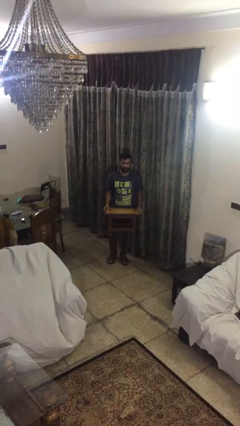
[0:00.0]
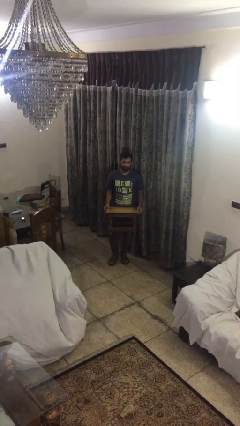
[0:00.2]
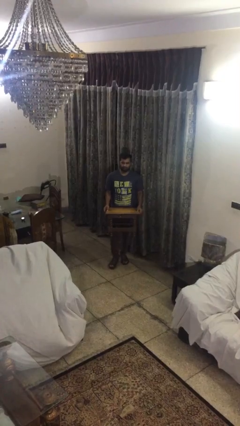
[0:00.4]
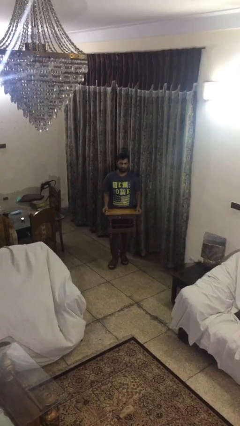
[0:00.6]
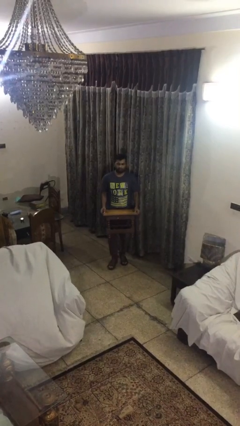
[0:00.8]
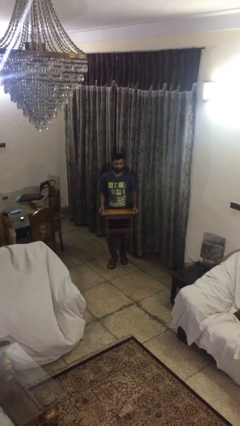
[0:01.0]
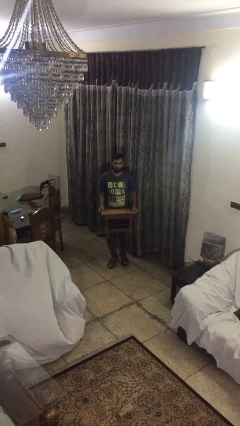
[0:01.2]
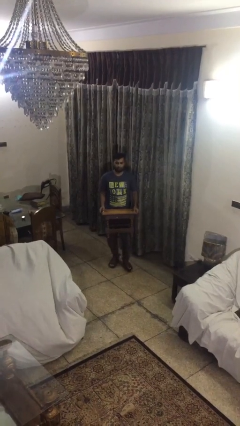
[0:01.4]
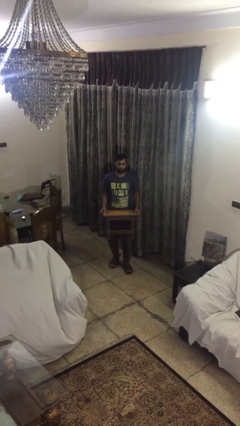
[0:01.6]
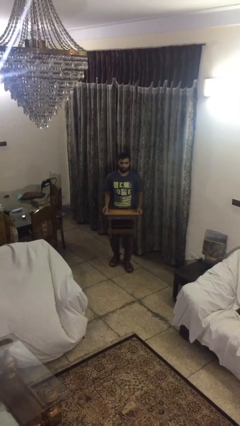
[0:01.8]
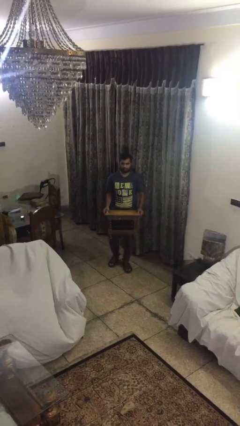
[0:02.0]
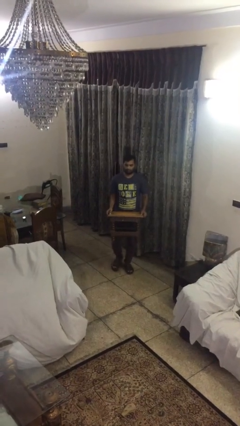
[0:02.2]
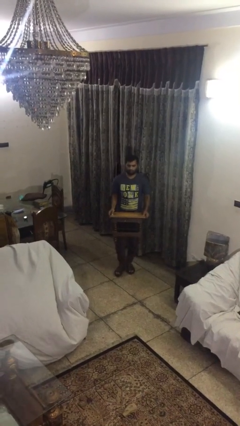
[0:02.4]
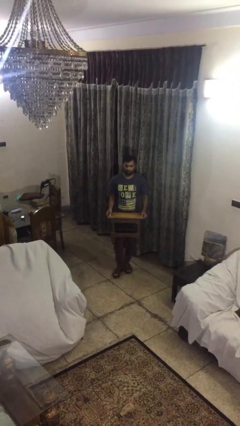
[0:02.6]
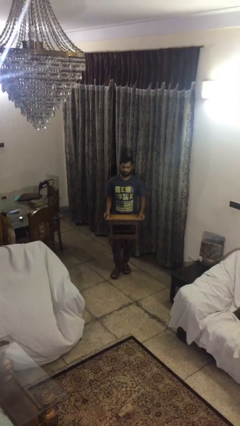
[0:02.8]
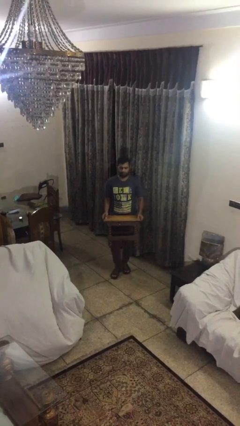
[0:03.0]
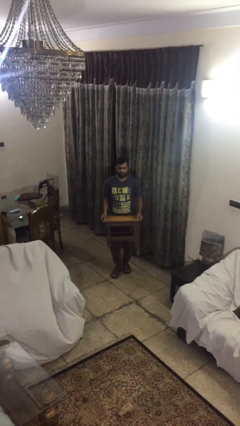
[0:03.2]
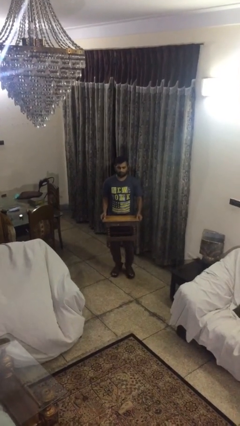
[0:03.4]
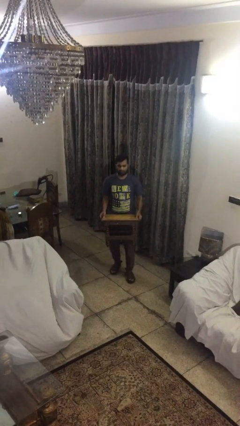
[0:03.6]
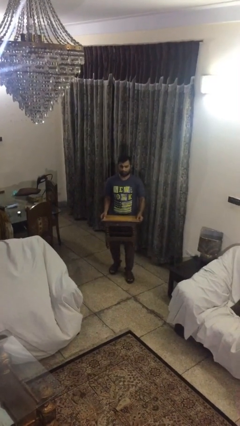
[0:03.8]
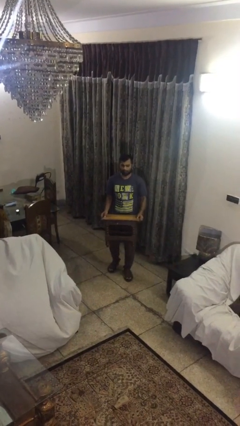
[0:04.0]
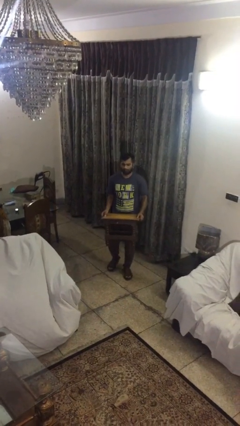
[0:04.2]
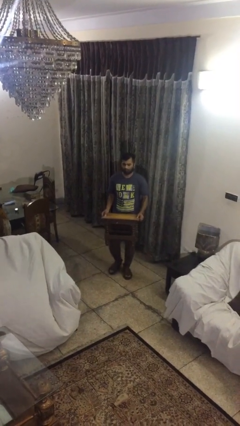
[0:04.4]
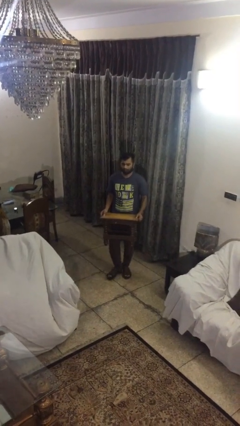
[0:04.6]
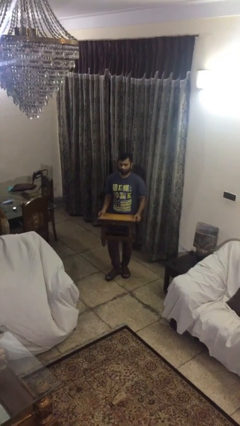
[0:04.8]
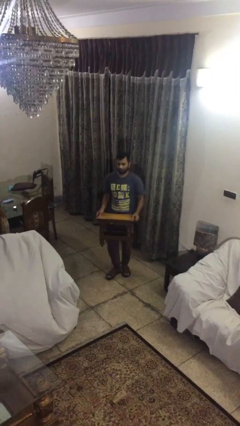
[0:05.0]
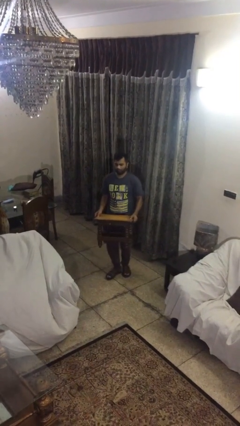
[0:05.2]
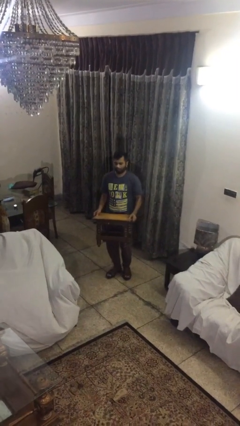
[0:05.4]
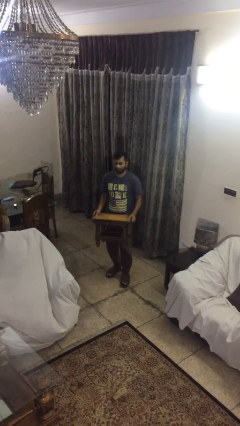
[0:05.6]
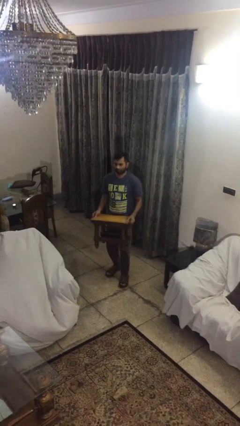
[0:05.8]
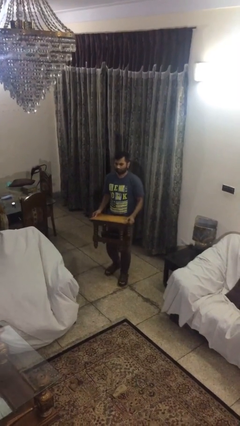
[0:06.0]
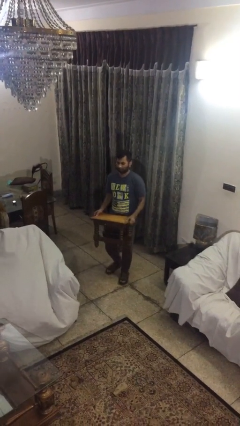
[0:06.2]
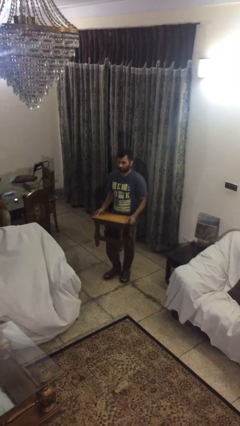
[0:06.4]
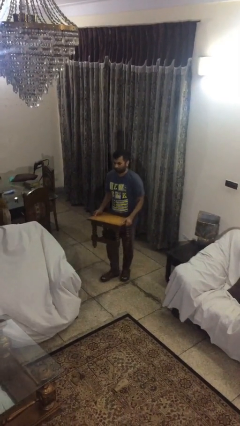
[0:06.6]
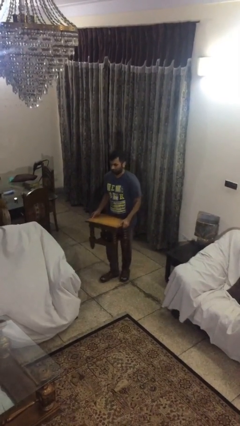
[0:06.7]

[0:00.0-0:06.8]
person carries heavy object

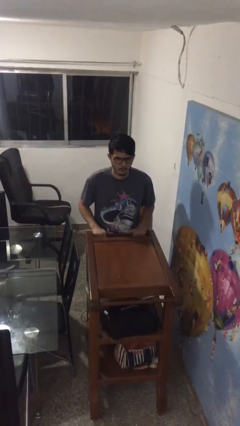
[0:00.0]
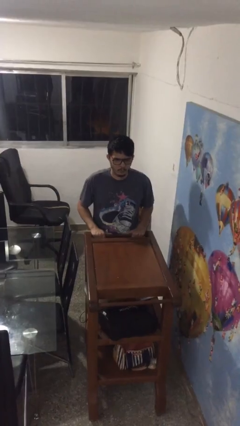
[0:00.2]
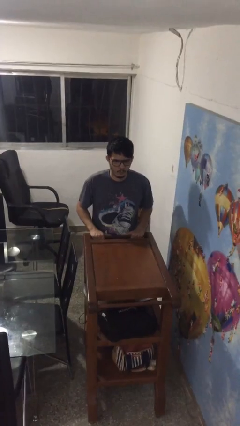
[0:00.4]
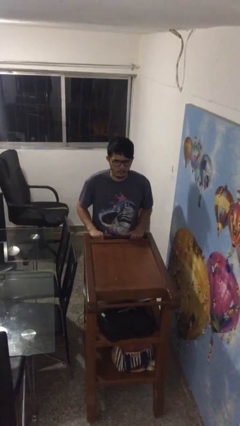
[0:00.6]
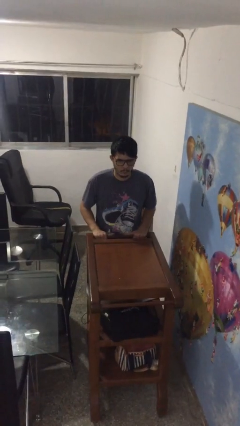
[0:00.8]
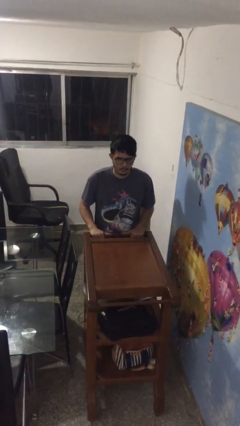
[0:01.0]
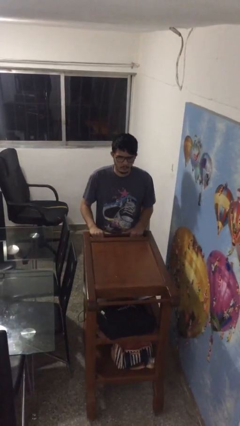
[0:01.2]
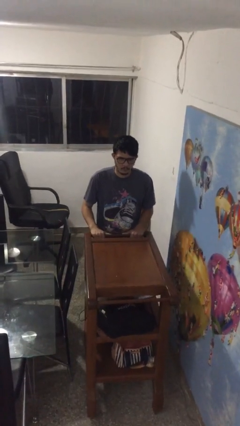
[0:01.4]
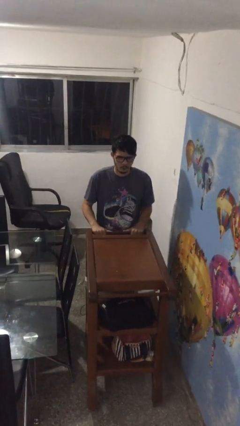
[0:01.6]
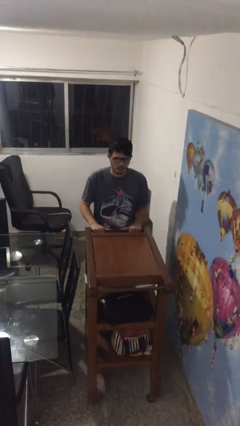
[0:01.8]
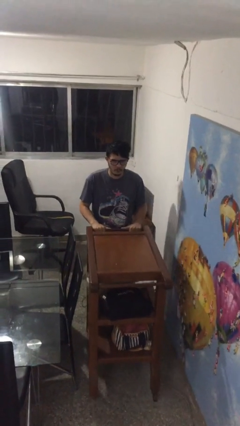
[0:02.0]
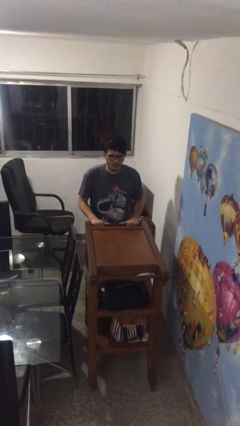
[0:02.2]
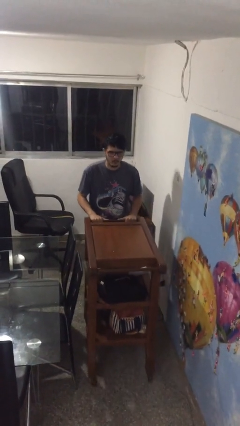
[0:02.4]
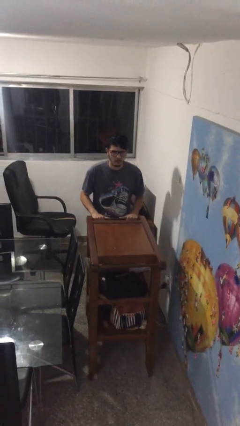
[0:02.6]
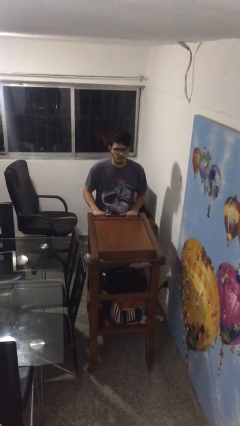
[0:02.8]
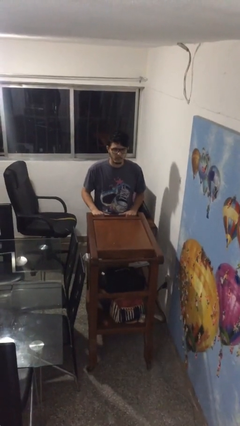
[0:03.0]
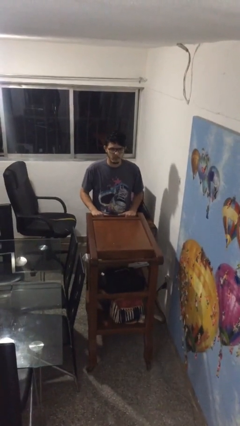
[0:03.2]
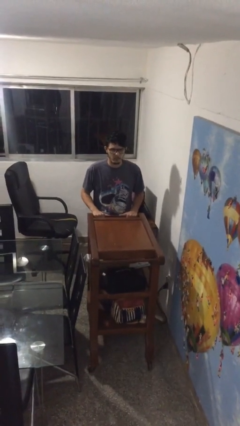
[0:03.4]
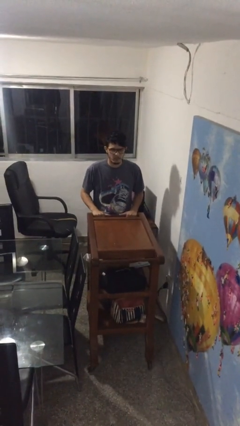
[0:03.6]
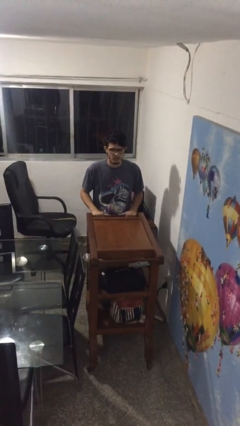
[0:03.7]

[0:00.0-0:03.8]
person pulls wheeled cart

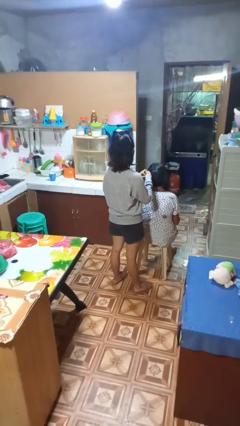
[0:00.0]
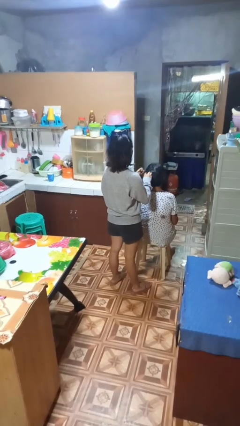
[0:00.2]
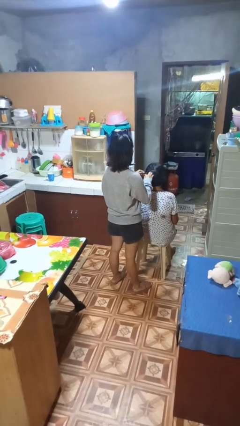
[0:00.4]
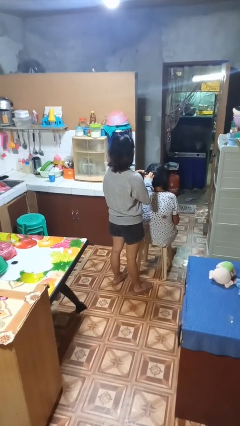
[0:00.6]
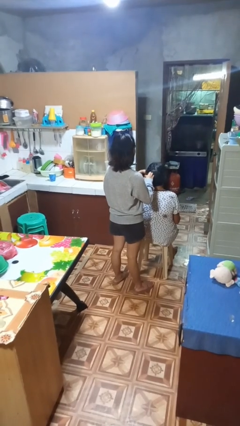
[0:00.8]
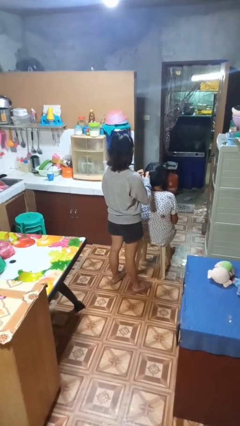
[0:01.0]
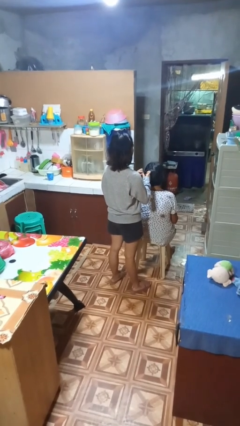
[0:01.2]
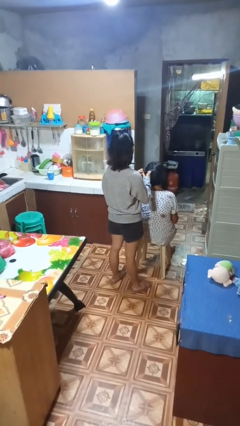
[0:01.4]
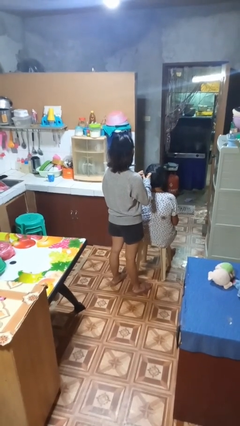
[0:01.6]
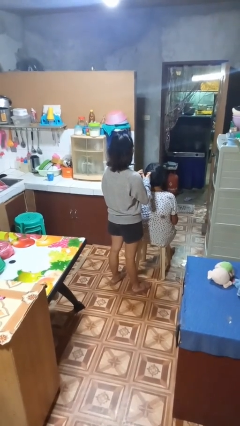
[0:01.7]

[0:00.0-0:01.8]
person braids hair of person

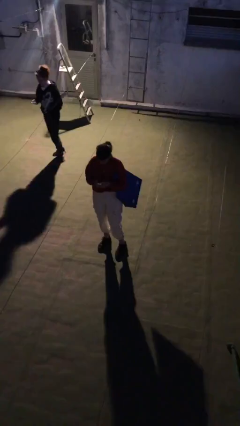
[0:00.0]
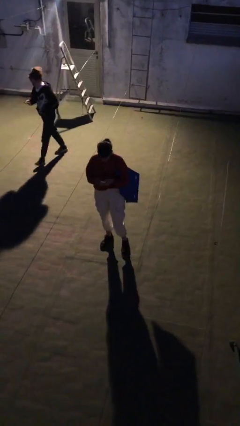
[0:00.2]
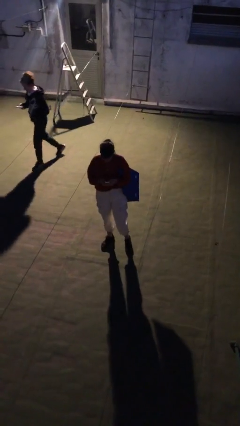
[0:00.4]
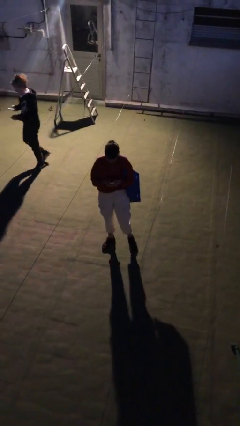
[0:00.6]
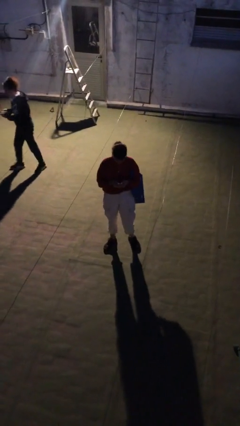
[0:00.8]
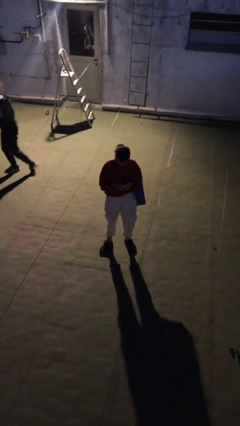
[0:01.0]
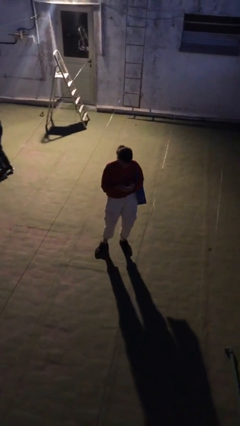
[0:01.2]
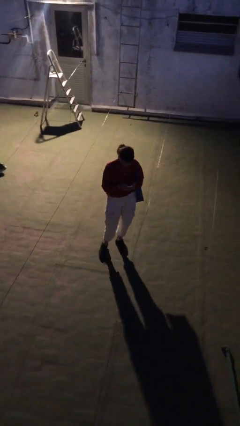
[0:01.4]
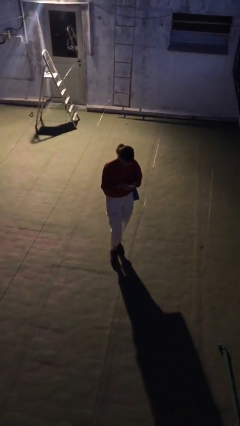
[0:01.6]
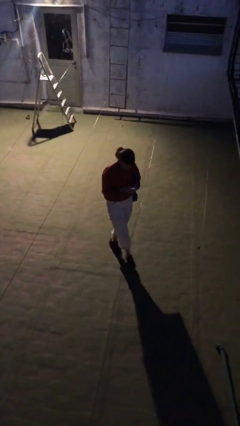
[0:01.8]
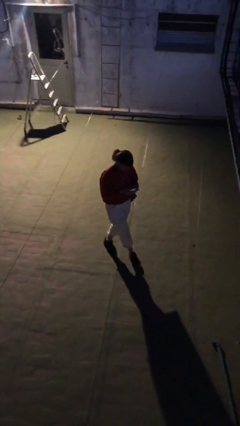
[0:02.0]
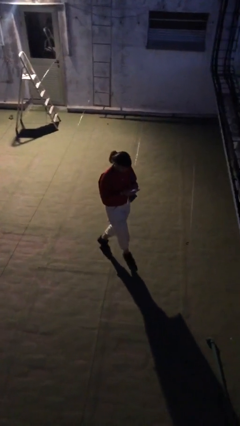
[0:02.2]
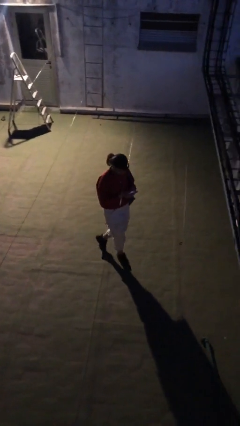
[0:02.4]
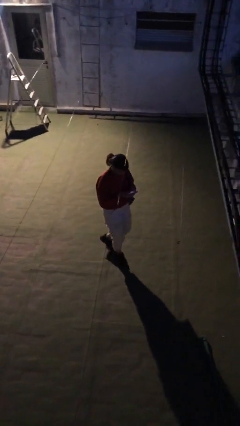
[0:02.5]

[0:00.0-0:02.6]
person texts on phone

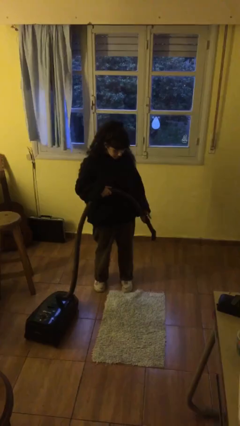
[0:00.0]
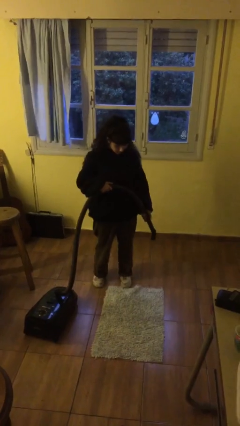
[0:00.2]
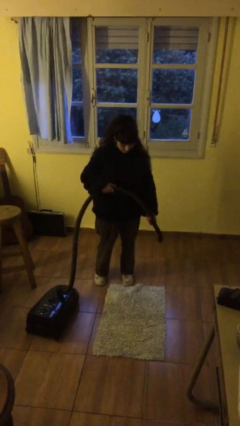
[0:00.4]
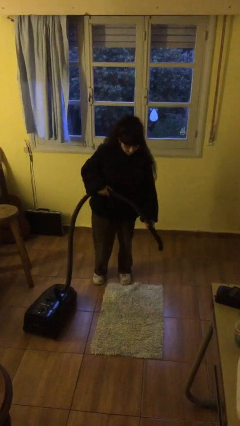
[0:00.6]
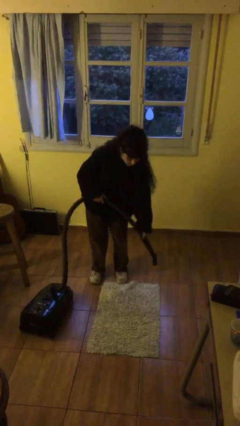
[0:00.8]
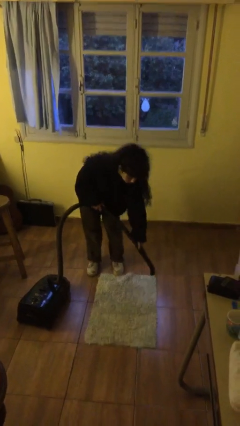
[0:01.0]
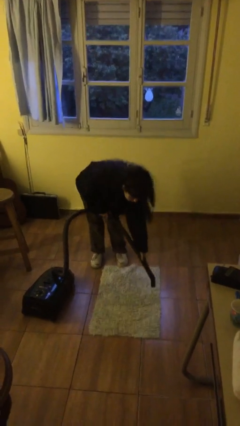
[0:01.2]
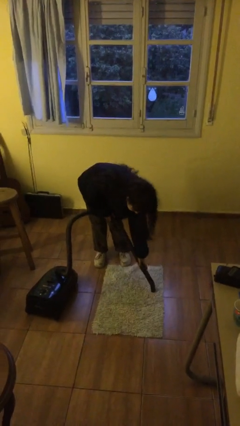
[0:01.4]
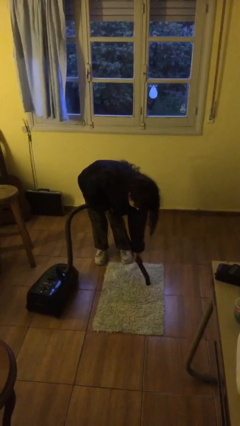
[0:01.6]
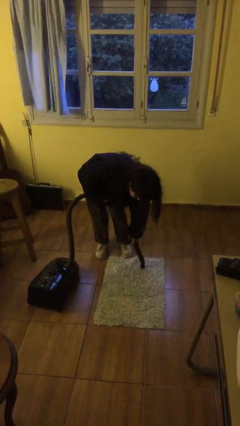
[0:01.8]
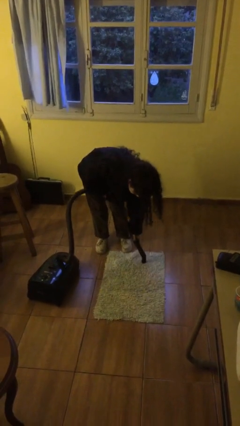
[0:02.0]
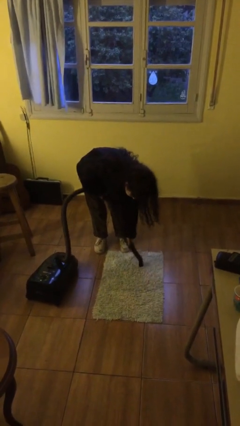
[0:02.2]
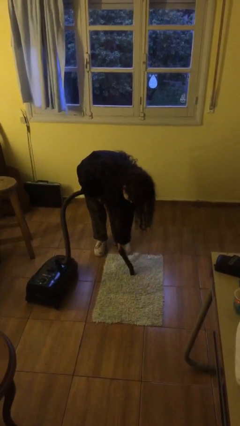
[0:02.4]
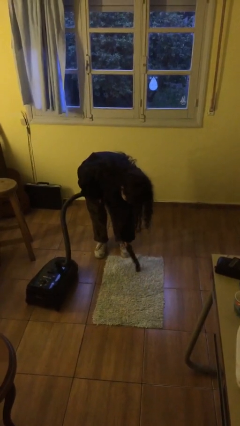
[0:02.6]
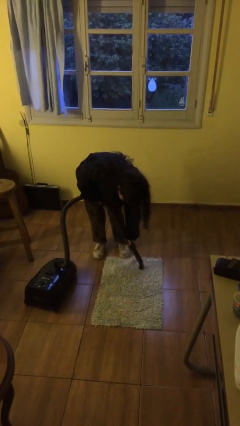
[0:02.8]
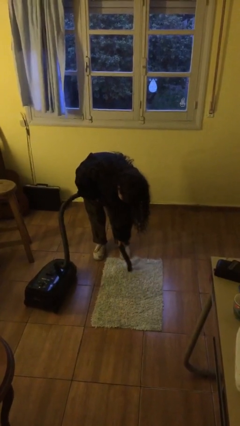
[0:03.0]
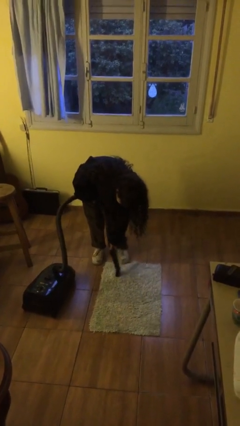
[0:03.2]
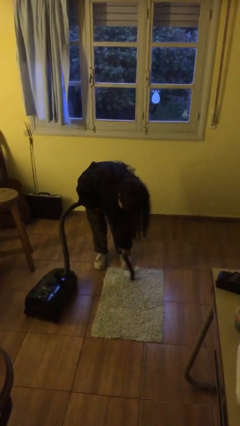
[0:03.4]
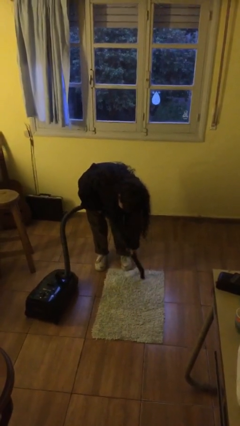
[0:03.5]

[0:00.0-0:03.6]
person vacuums carpet
